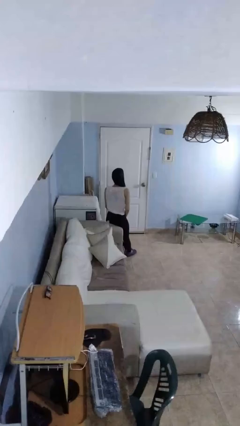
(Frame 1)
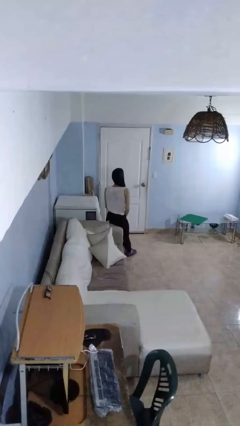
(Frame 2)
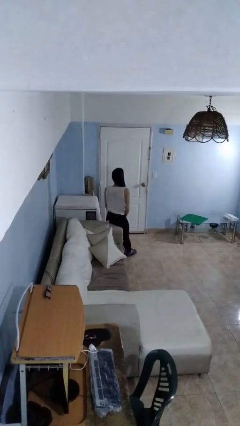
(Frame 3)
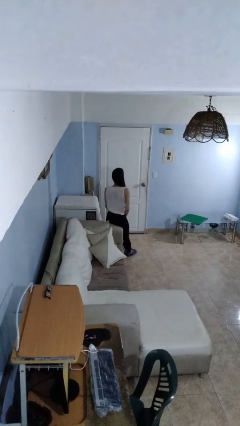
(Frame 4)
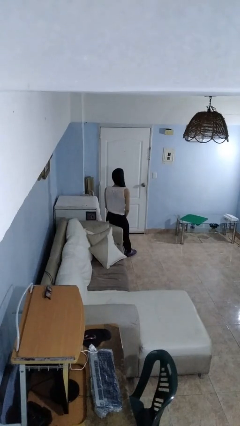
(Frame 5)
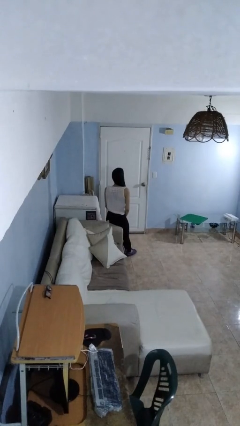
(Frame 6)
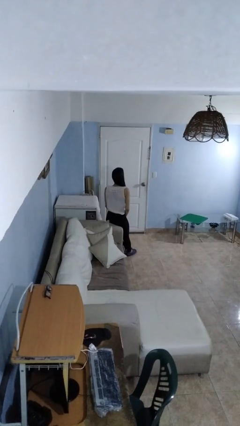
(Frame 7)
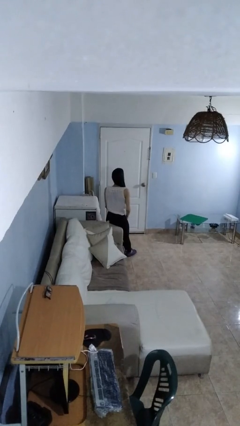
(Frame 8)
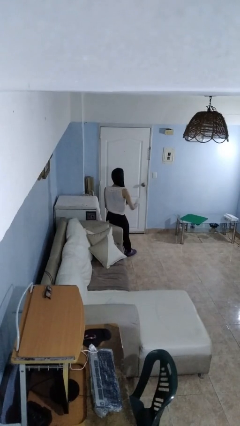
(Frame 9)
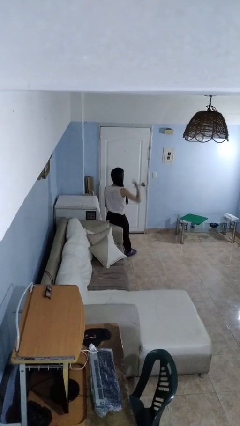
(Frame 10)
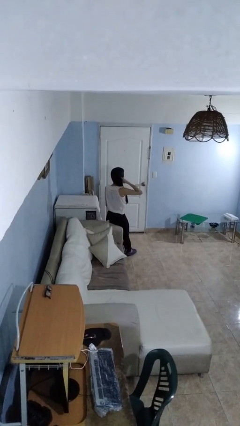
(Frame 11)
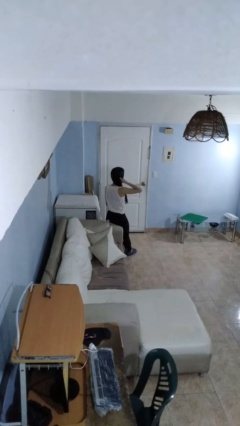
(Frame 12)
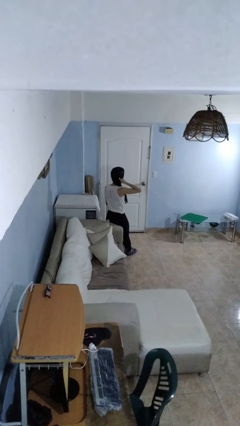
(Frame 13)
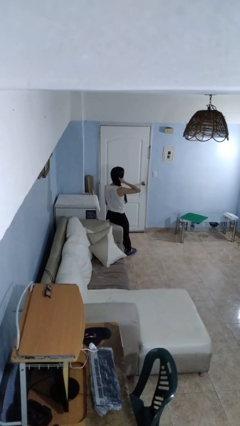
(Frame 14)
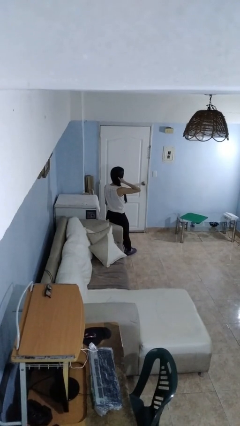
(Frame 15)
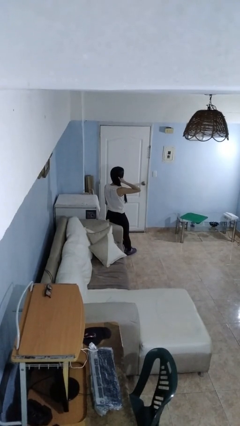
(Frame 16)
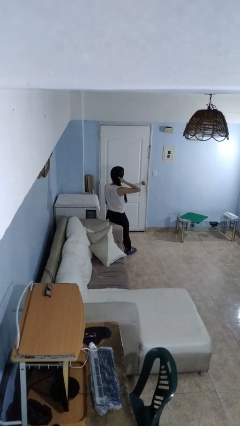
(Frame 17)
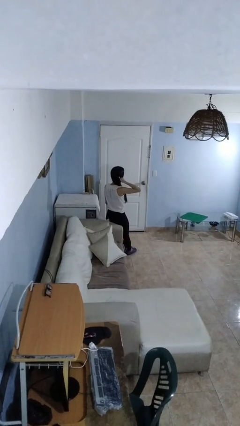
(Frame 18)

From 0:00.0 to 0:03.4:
person gestures call me

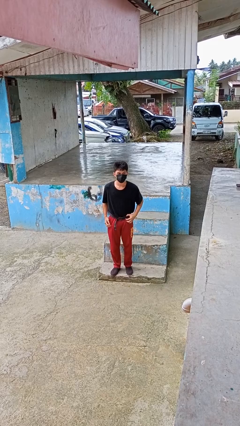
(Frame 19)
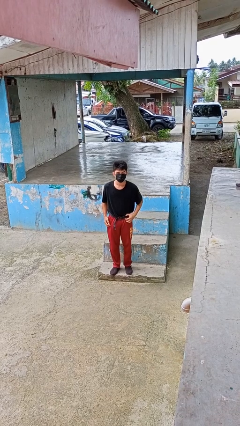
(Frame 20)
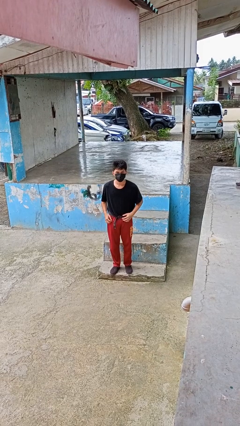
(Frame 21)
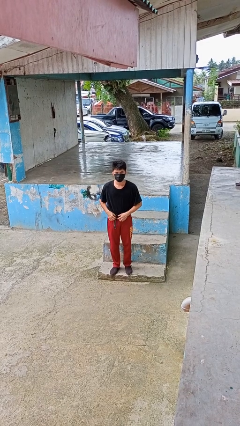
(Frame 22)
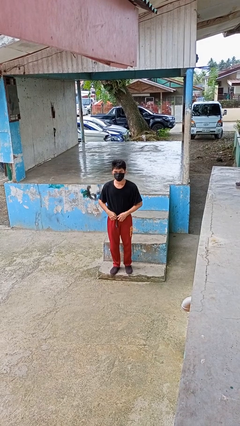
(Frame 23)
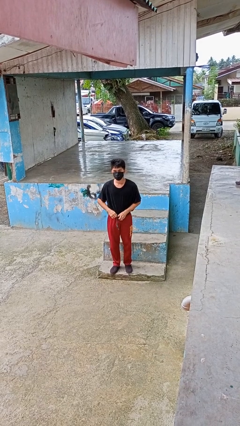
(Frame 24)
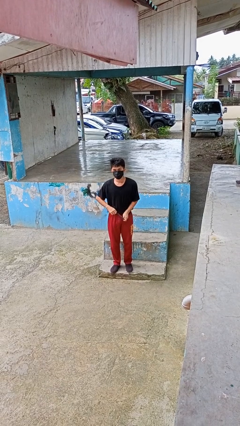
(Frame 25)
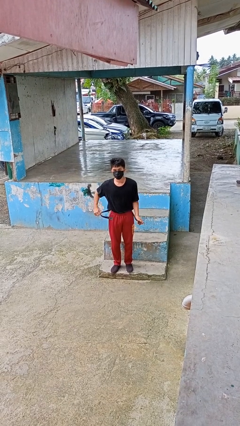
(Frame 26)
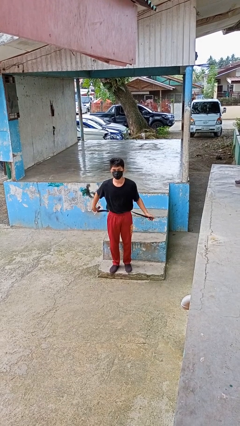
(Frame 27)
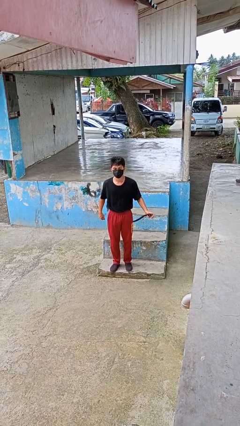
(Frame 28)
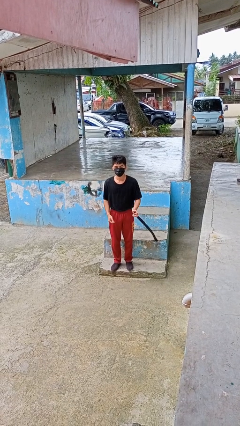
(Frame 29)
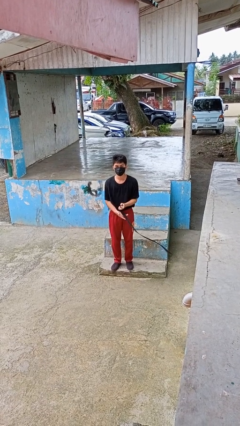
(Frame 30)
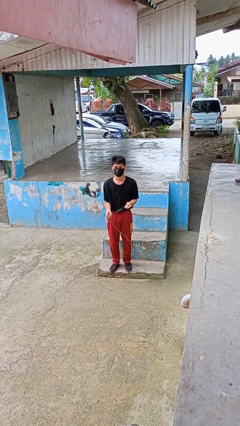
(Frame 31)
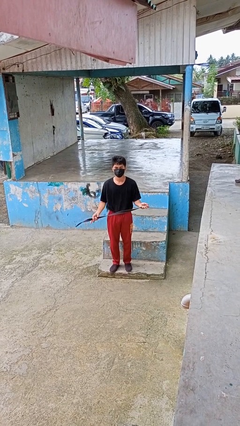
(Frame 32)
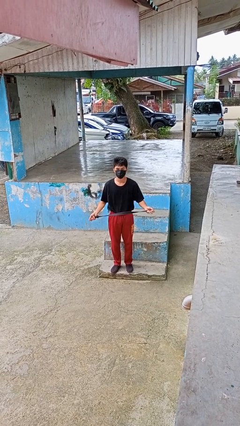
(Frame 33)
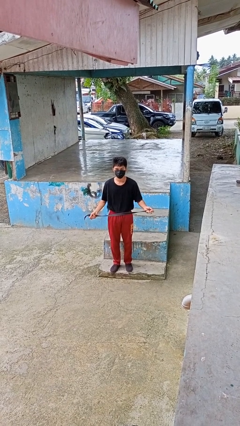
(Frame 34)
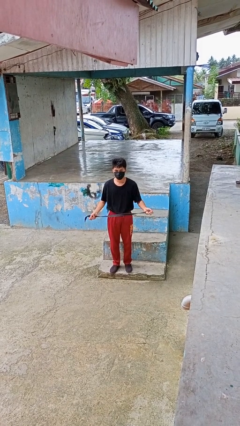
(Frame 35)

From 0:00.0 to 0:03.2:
person takes off belt

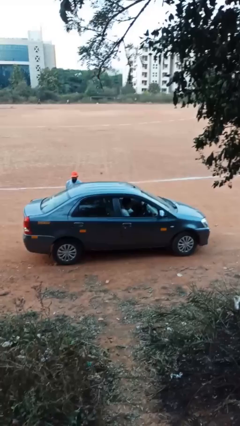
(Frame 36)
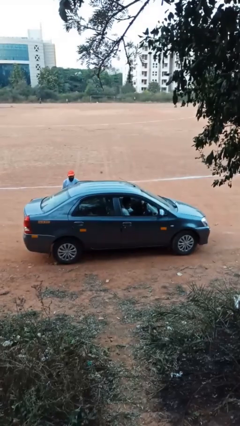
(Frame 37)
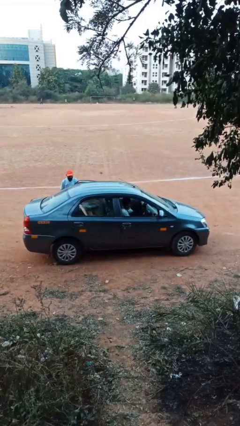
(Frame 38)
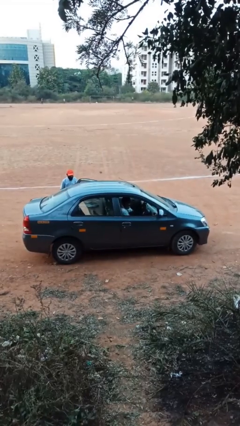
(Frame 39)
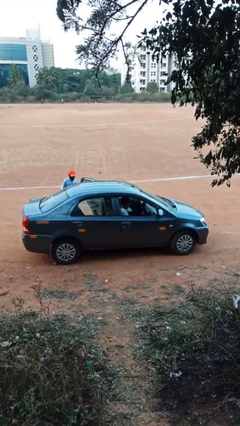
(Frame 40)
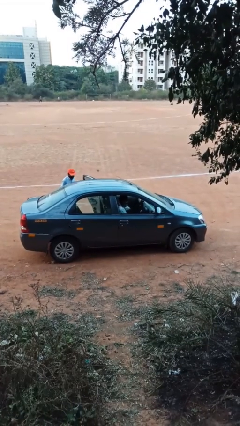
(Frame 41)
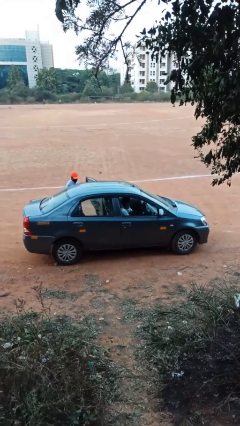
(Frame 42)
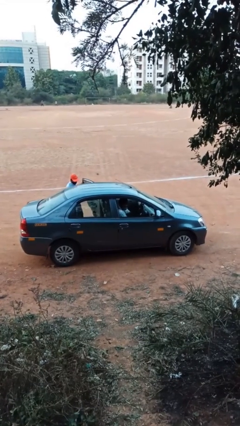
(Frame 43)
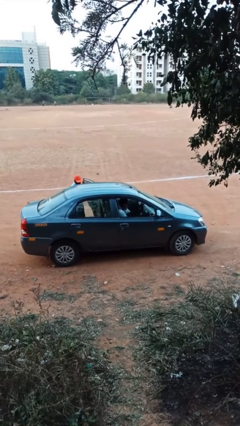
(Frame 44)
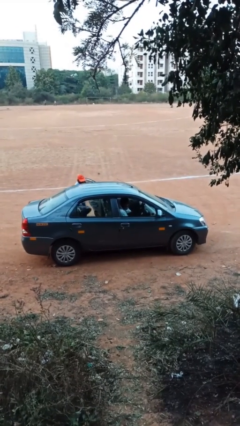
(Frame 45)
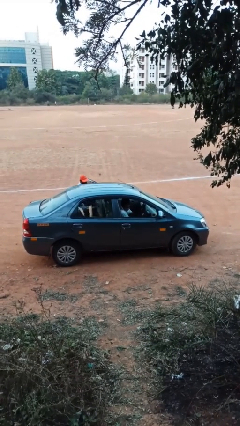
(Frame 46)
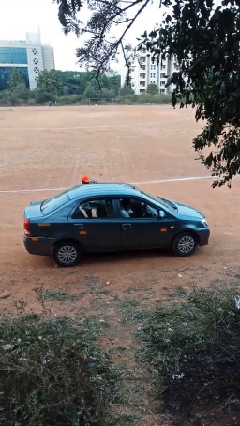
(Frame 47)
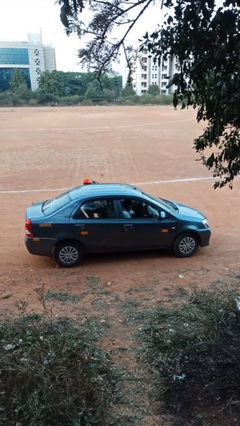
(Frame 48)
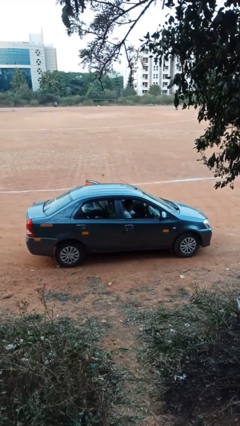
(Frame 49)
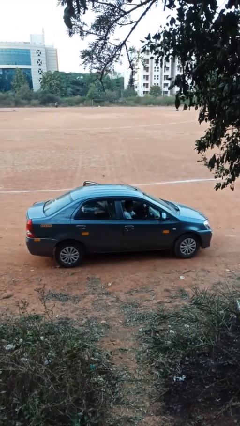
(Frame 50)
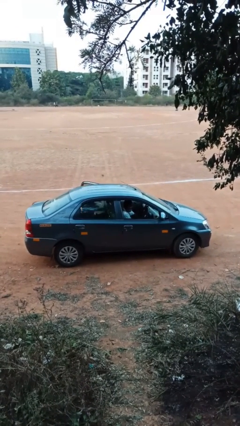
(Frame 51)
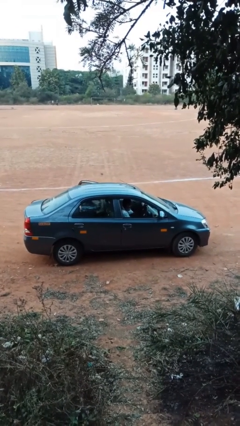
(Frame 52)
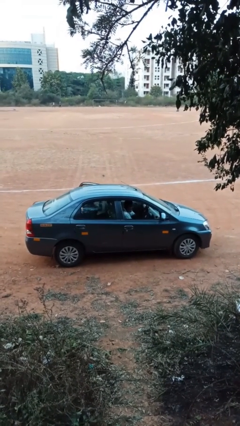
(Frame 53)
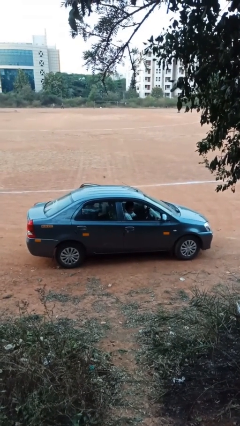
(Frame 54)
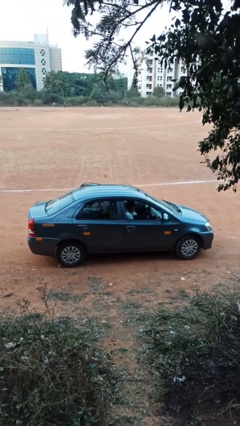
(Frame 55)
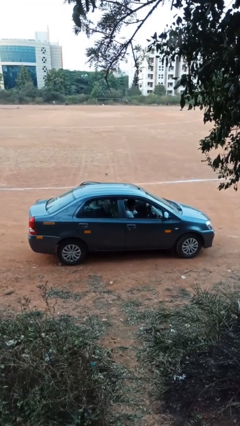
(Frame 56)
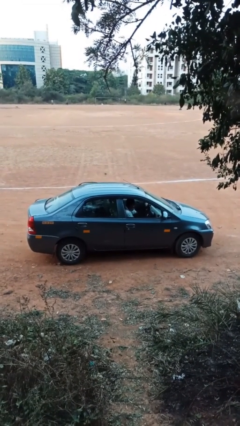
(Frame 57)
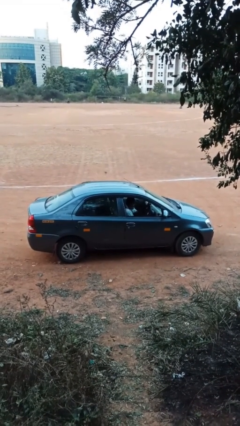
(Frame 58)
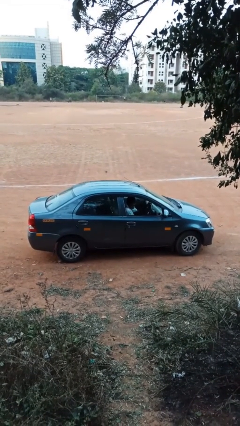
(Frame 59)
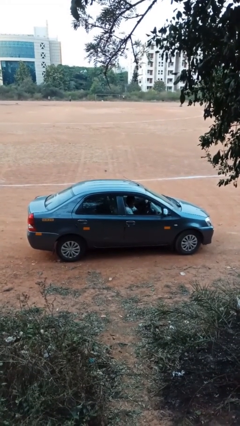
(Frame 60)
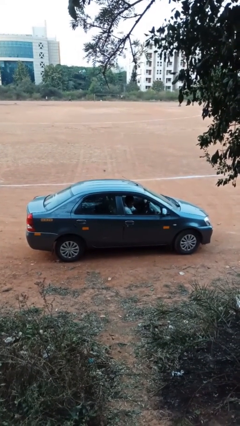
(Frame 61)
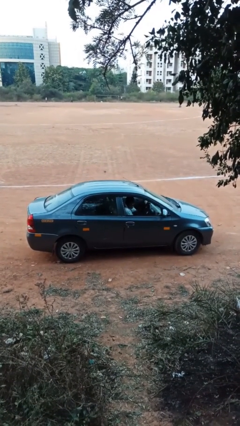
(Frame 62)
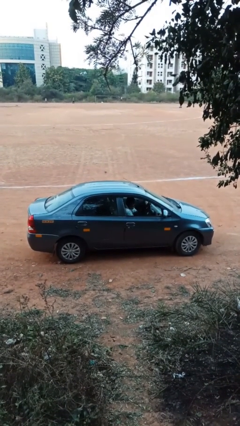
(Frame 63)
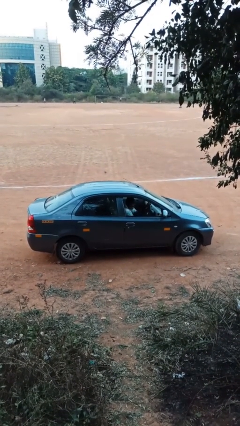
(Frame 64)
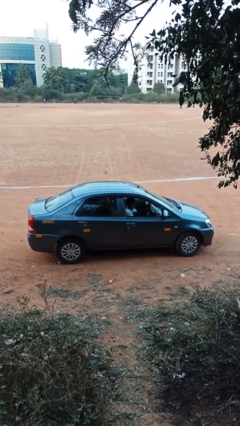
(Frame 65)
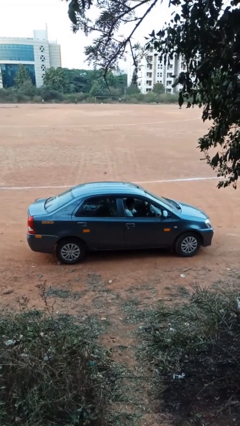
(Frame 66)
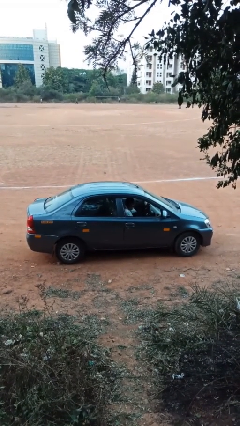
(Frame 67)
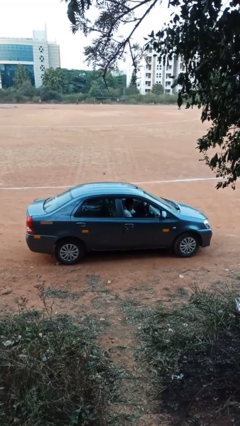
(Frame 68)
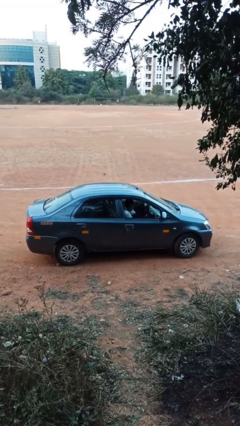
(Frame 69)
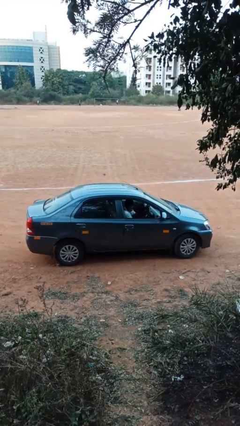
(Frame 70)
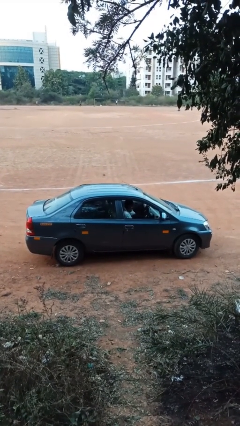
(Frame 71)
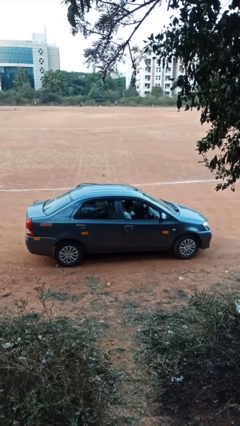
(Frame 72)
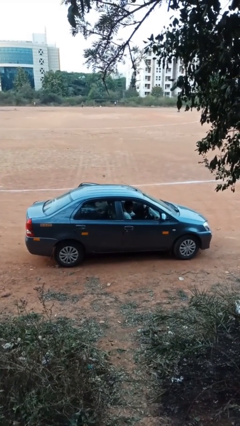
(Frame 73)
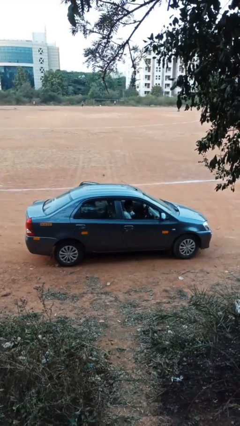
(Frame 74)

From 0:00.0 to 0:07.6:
car picks up person

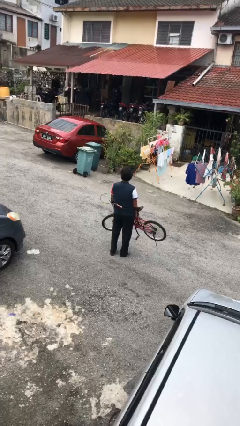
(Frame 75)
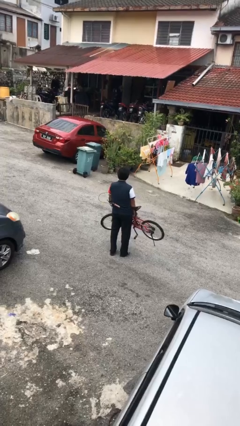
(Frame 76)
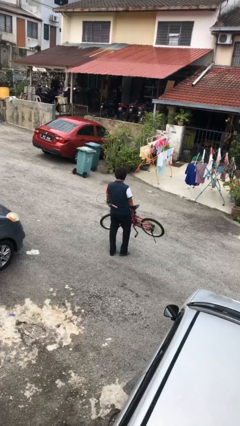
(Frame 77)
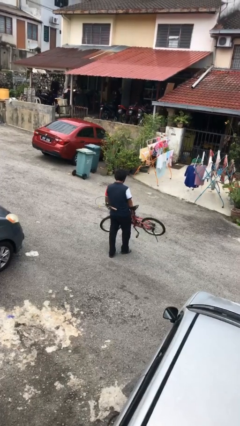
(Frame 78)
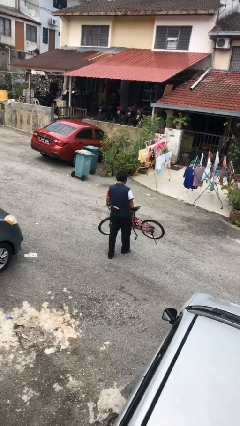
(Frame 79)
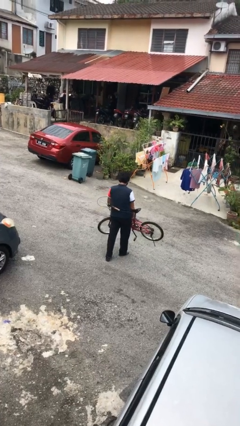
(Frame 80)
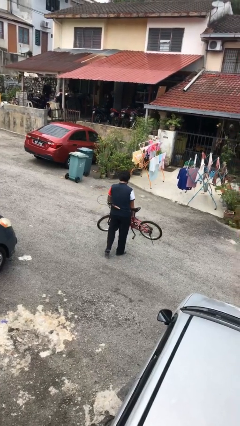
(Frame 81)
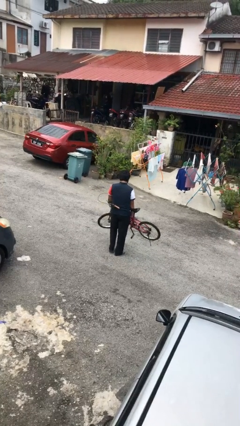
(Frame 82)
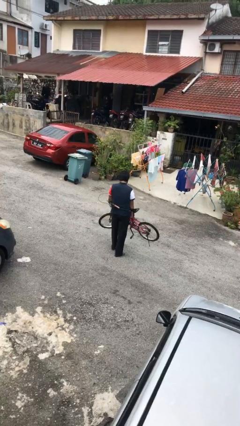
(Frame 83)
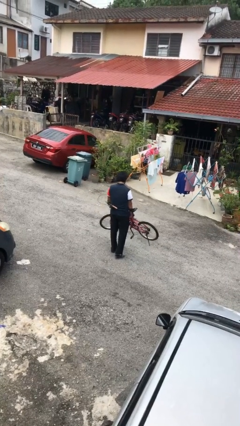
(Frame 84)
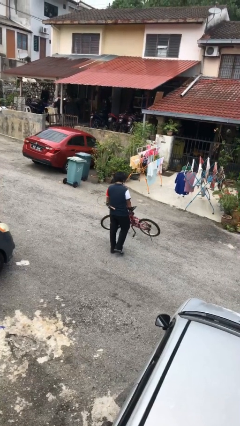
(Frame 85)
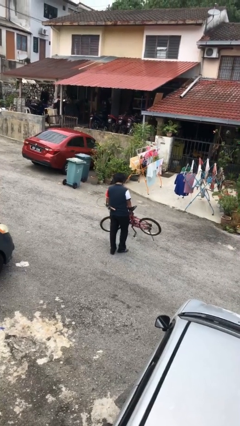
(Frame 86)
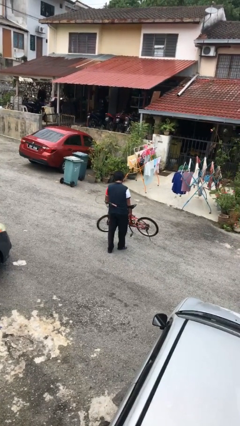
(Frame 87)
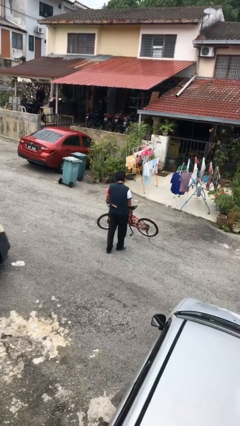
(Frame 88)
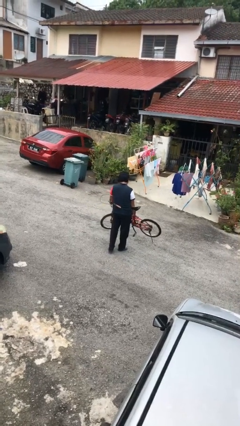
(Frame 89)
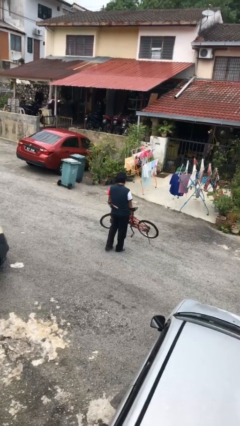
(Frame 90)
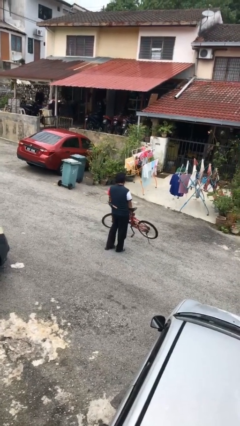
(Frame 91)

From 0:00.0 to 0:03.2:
person carries bicycle
